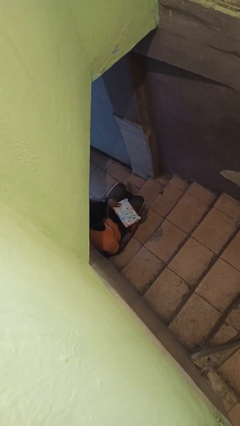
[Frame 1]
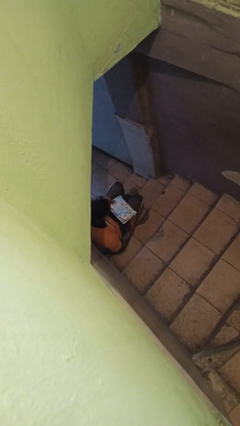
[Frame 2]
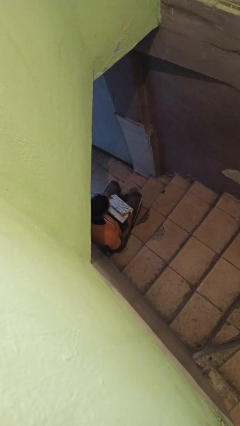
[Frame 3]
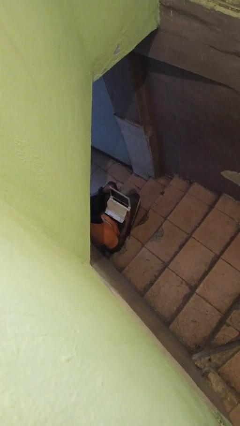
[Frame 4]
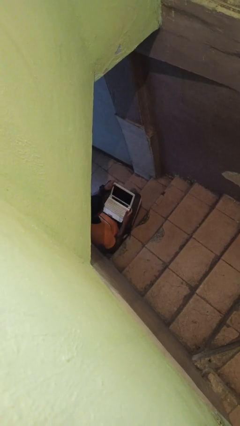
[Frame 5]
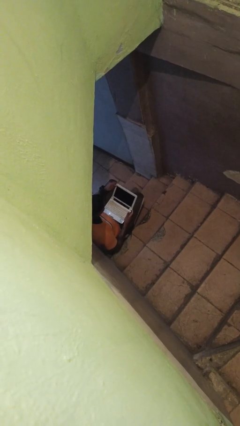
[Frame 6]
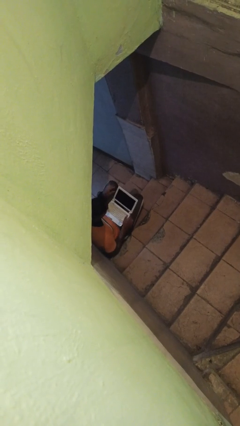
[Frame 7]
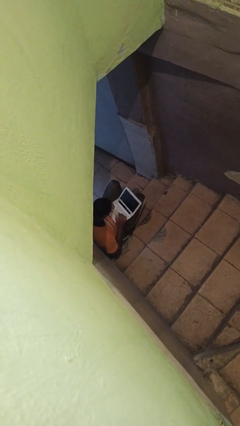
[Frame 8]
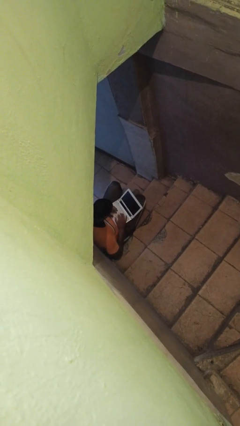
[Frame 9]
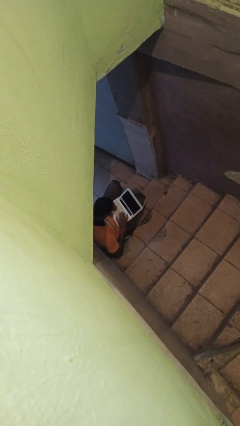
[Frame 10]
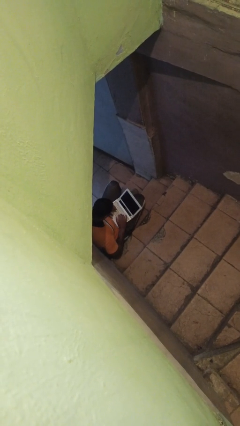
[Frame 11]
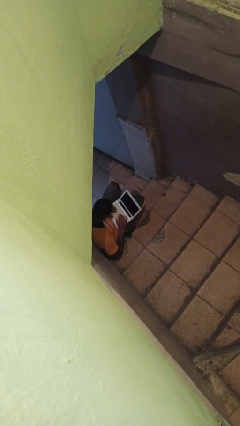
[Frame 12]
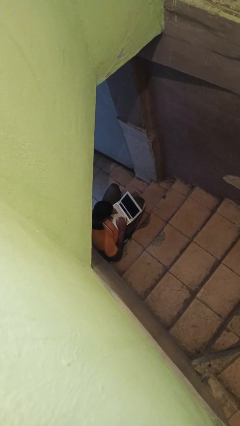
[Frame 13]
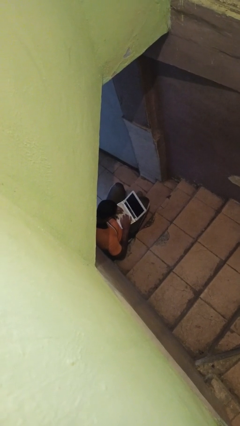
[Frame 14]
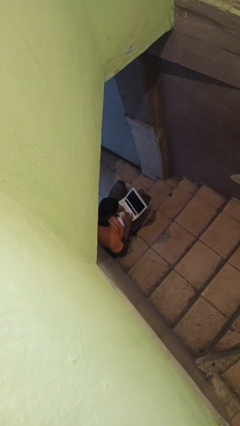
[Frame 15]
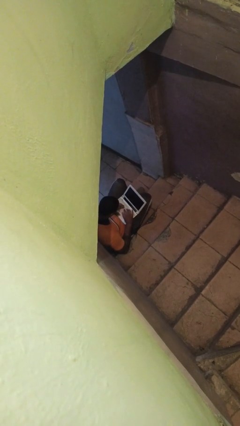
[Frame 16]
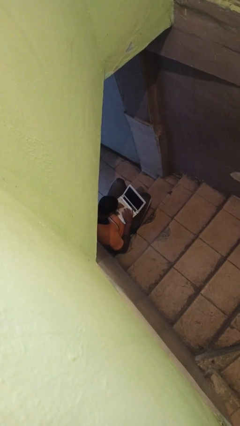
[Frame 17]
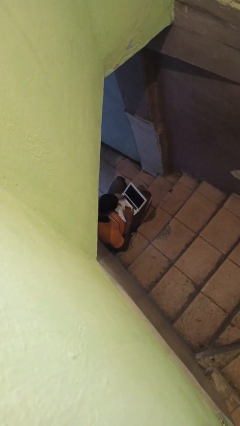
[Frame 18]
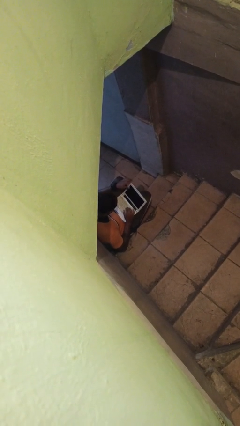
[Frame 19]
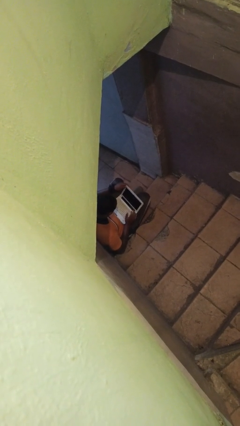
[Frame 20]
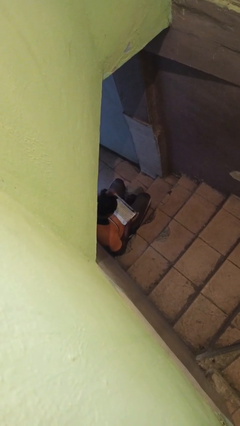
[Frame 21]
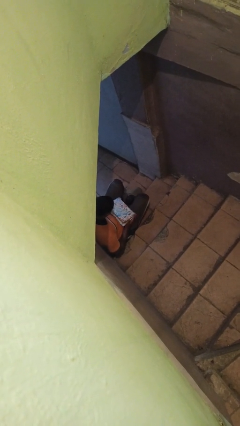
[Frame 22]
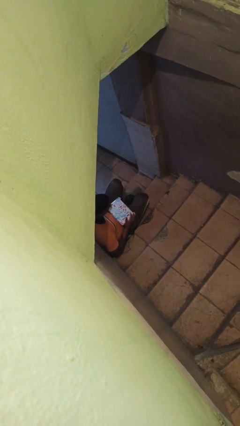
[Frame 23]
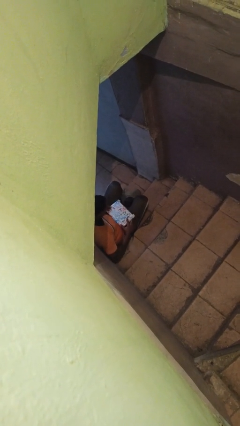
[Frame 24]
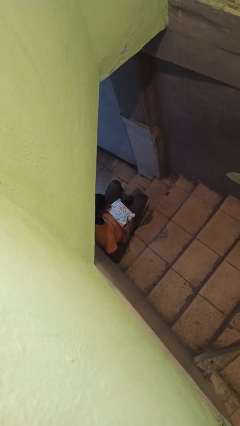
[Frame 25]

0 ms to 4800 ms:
person interacts with laptop

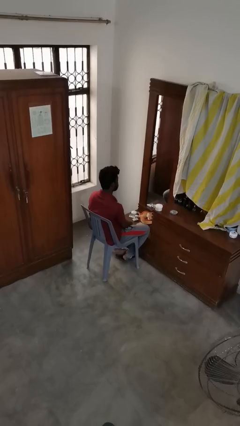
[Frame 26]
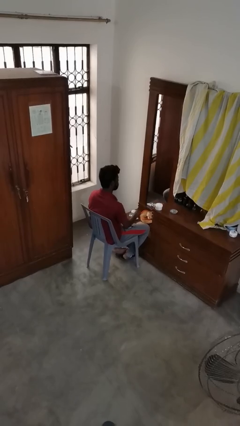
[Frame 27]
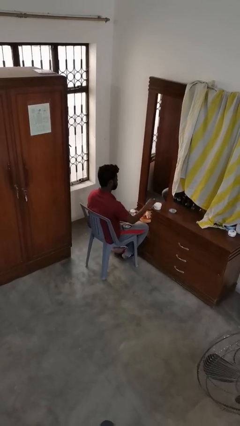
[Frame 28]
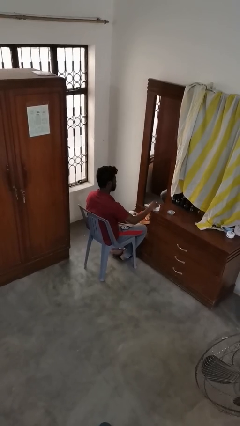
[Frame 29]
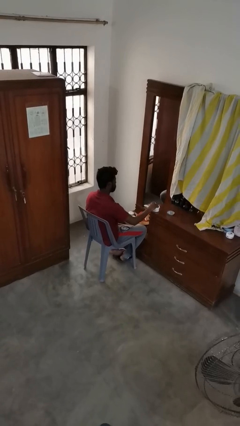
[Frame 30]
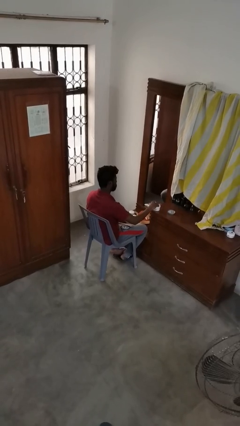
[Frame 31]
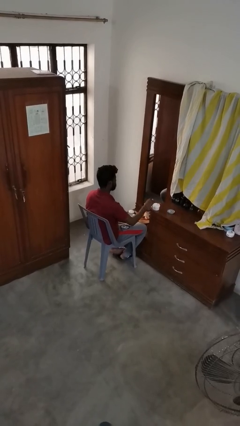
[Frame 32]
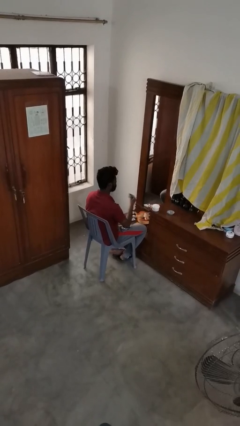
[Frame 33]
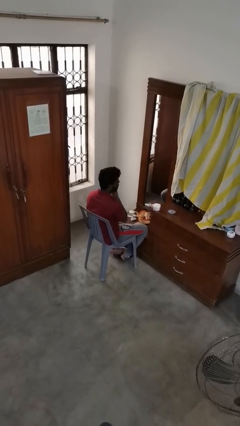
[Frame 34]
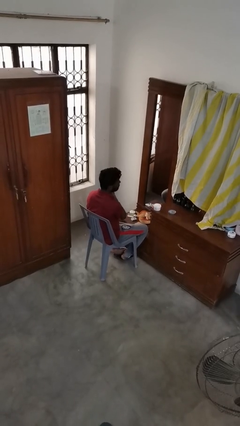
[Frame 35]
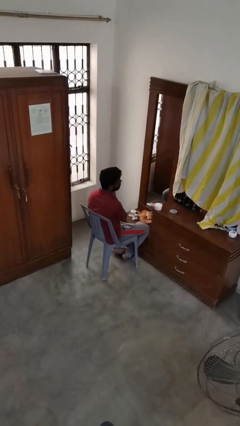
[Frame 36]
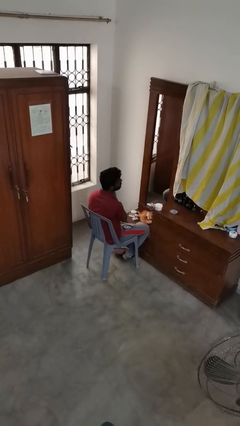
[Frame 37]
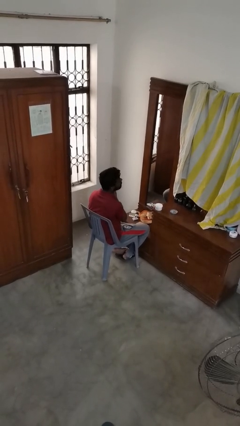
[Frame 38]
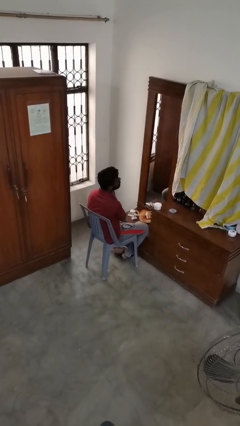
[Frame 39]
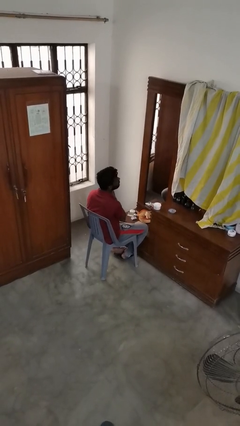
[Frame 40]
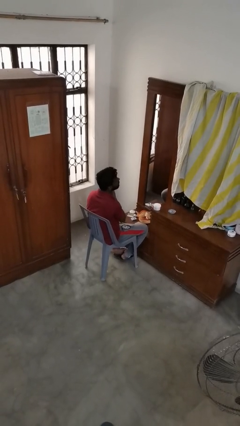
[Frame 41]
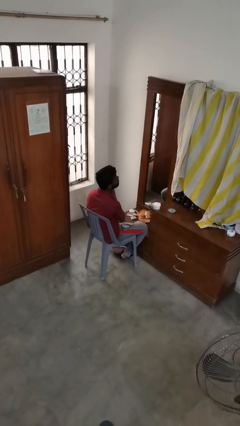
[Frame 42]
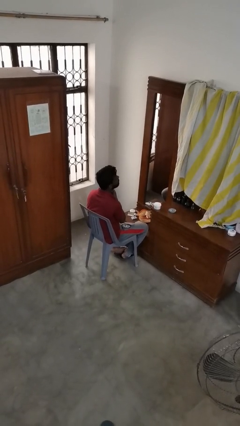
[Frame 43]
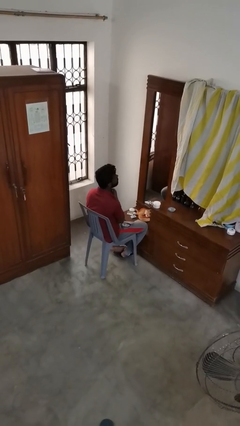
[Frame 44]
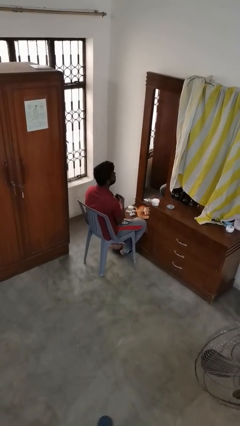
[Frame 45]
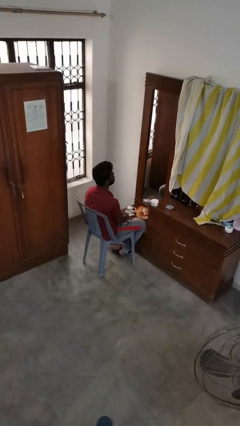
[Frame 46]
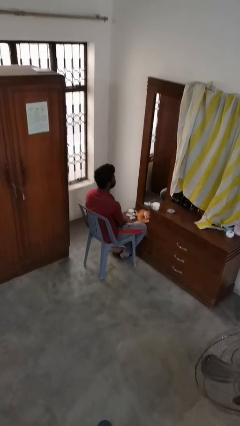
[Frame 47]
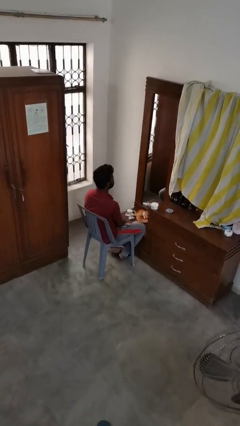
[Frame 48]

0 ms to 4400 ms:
person applies foundation makeup

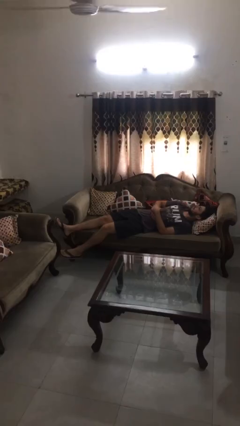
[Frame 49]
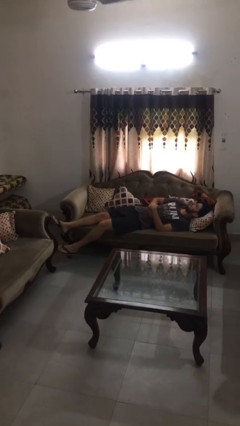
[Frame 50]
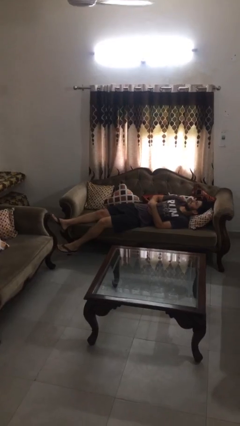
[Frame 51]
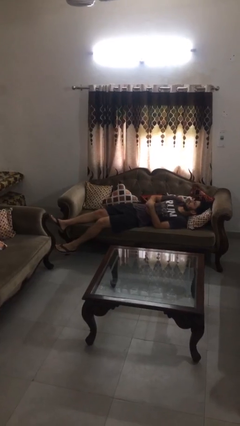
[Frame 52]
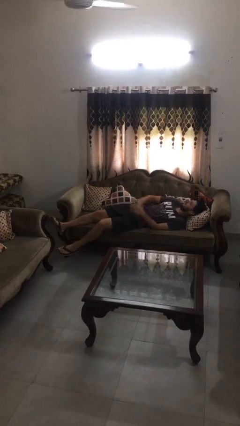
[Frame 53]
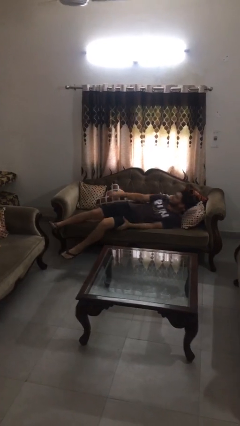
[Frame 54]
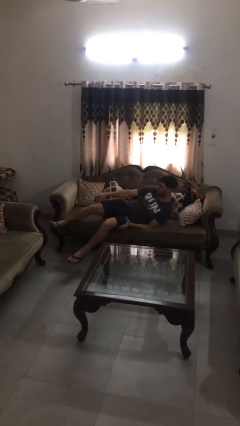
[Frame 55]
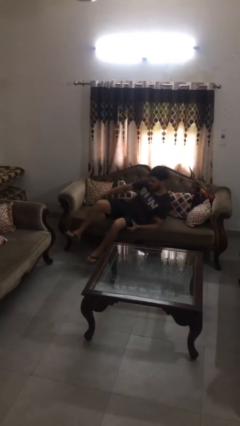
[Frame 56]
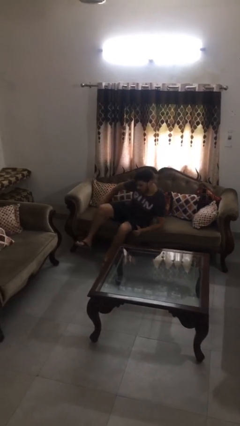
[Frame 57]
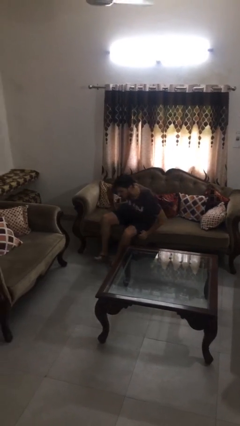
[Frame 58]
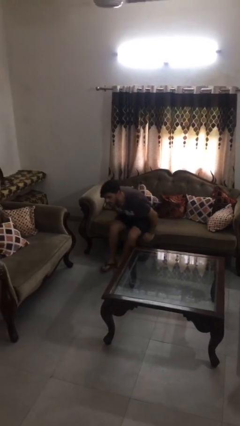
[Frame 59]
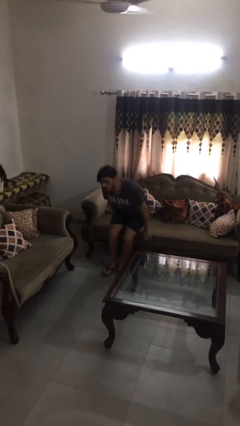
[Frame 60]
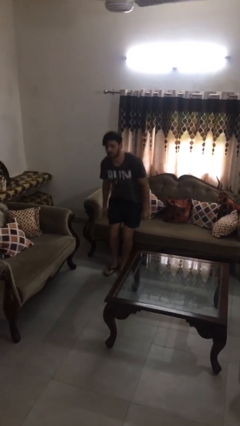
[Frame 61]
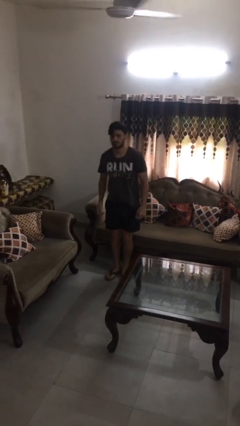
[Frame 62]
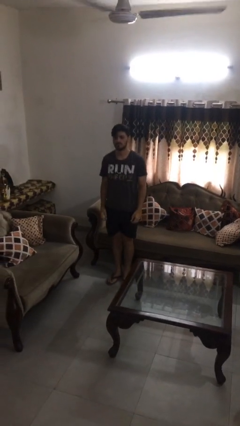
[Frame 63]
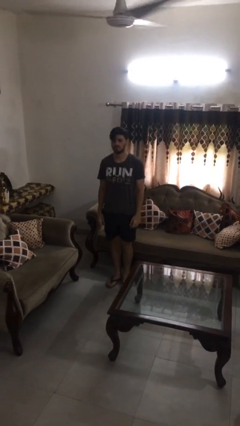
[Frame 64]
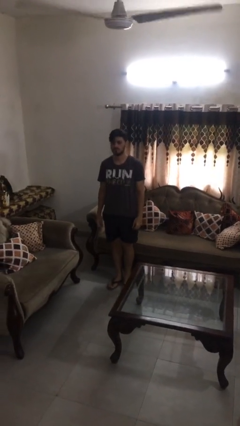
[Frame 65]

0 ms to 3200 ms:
person stands up

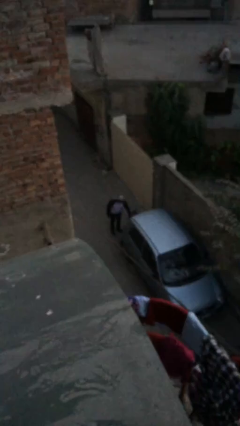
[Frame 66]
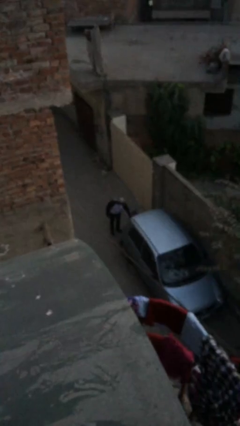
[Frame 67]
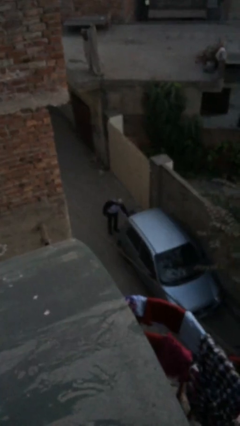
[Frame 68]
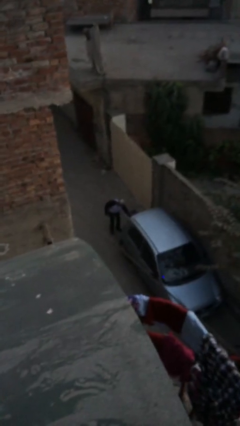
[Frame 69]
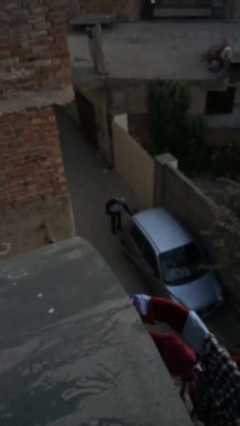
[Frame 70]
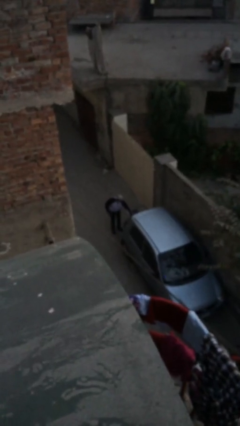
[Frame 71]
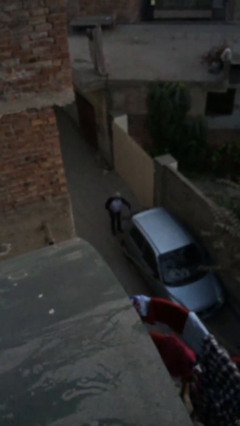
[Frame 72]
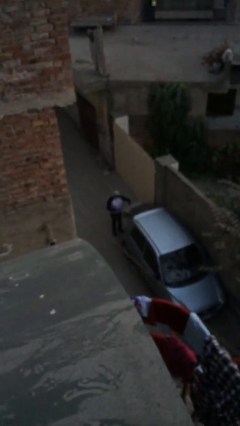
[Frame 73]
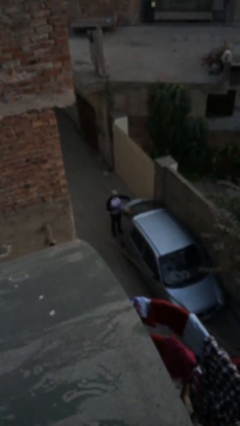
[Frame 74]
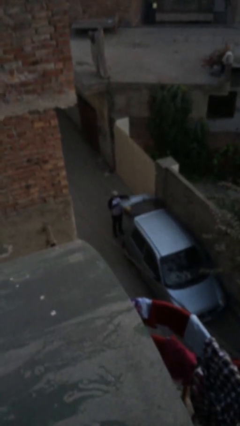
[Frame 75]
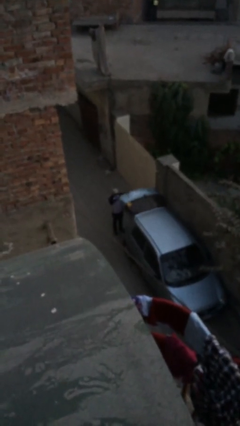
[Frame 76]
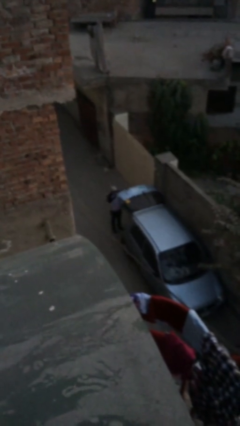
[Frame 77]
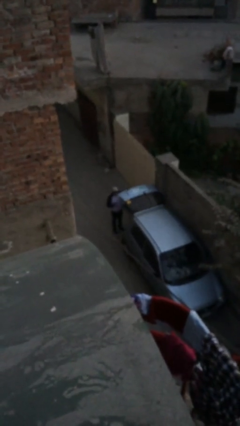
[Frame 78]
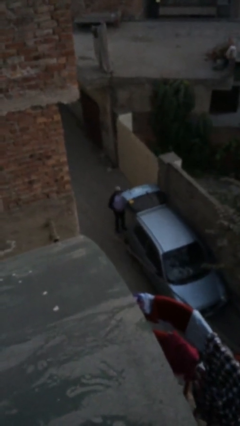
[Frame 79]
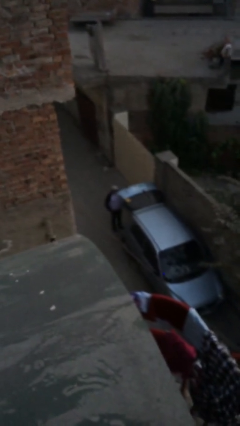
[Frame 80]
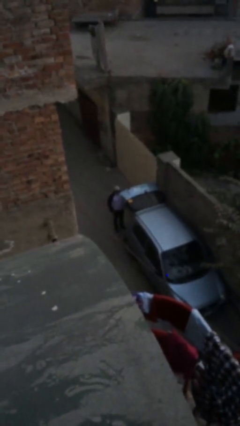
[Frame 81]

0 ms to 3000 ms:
person opens car trunk

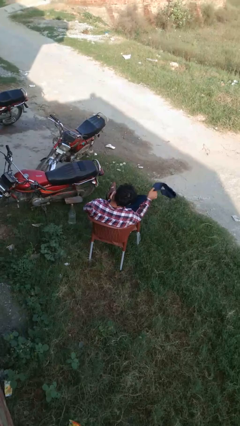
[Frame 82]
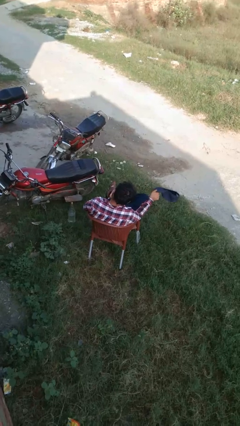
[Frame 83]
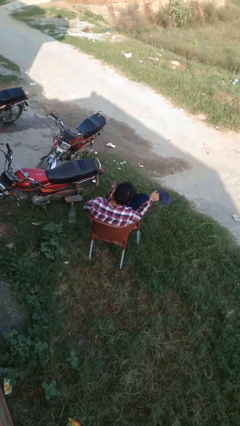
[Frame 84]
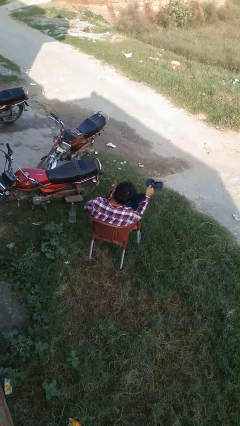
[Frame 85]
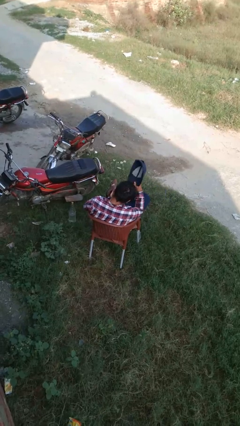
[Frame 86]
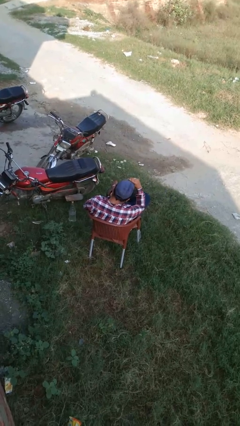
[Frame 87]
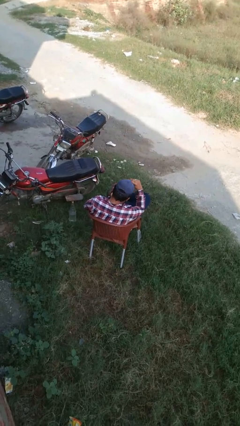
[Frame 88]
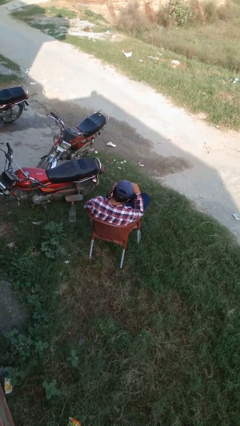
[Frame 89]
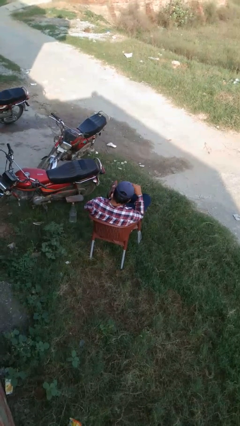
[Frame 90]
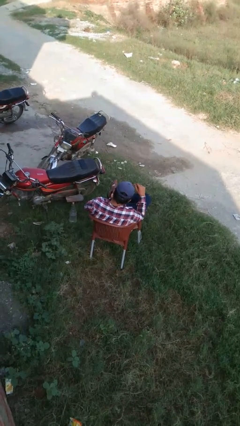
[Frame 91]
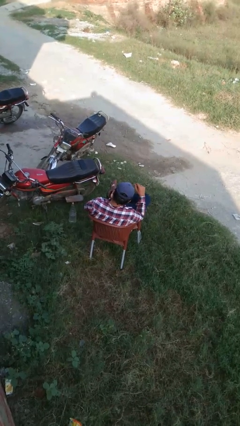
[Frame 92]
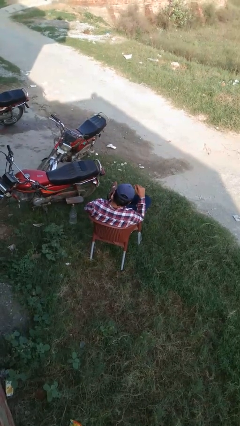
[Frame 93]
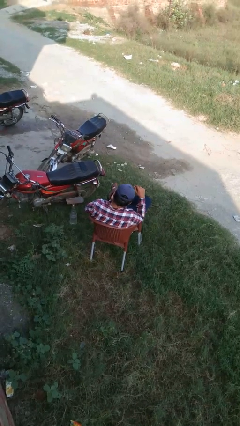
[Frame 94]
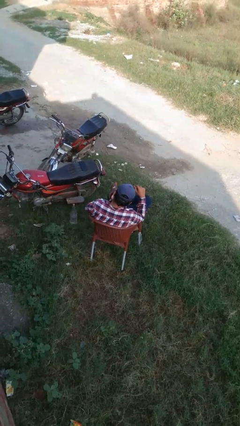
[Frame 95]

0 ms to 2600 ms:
person puts on hat
